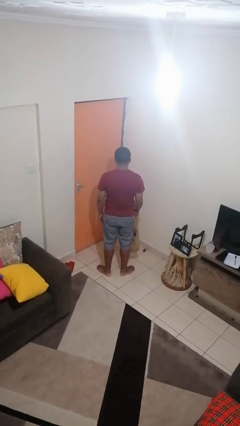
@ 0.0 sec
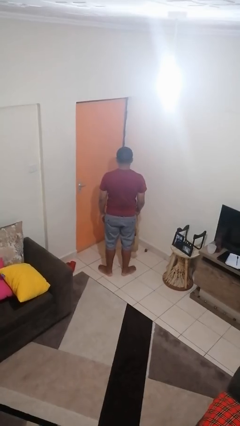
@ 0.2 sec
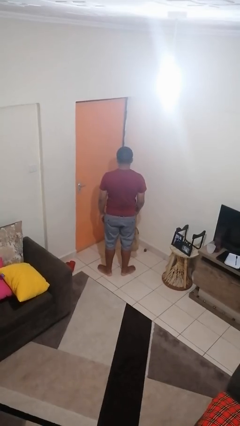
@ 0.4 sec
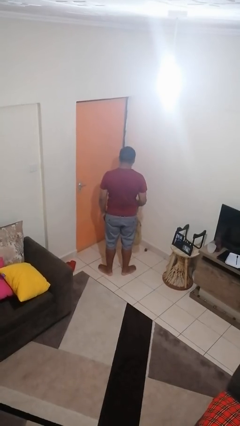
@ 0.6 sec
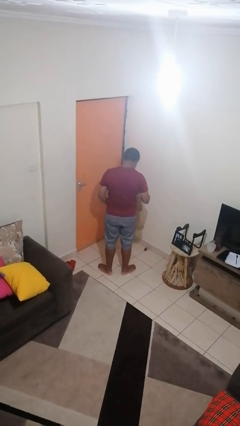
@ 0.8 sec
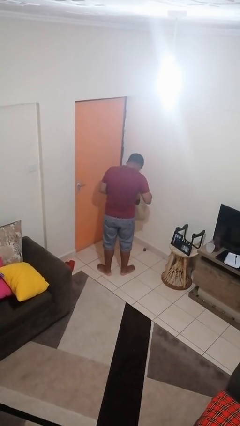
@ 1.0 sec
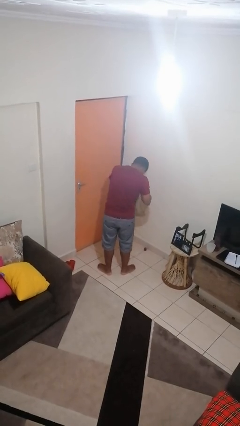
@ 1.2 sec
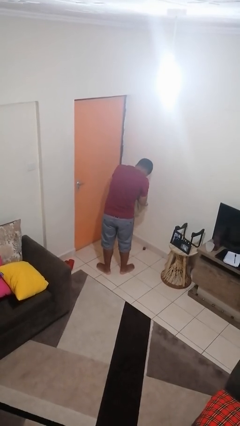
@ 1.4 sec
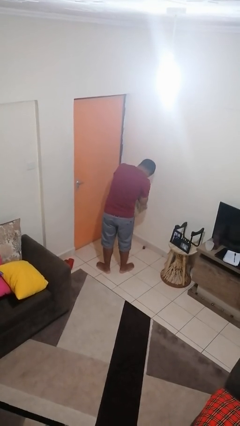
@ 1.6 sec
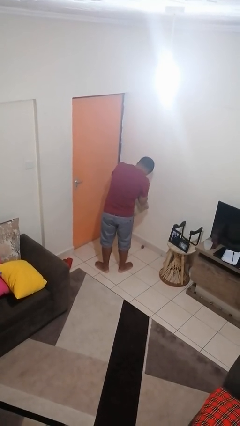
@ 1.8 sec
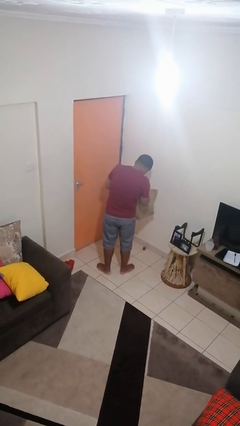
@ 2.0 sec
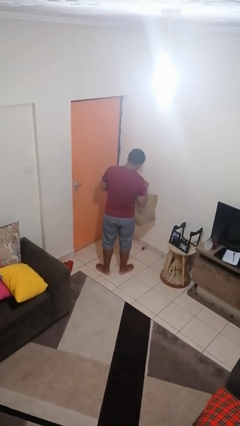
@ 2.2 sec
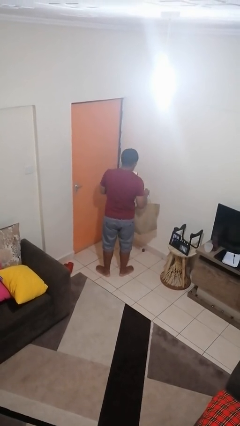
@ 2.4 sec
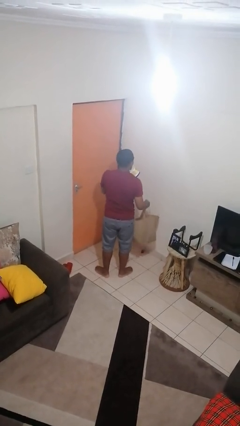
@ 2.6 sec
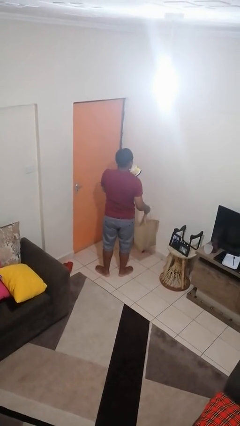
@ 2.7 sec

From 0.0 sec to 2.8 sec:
person takes object from bag

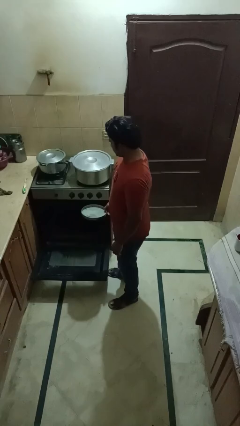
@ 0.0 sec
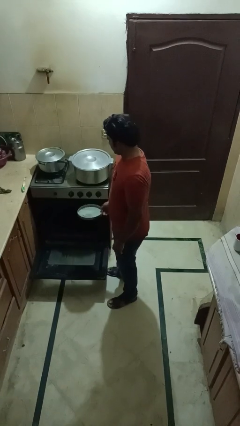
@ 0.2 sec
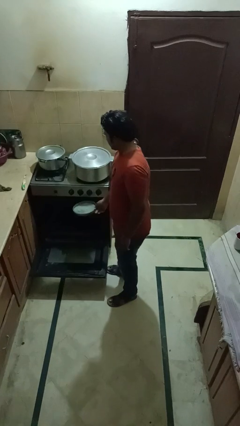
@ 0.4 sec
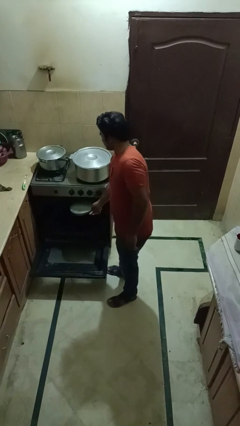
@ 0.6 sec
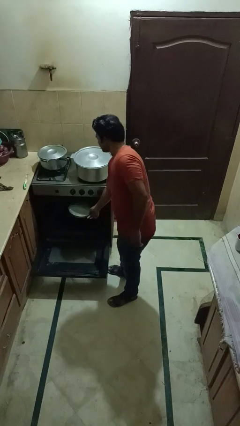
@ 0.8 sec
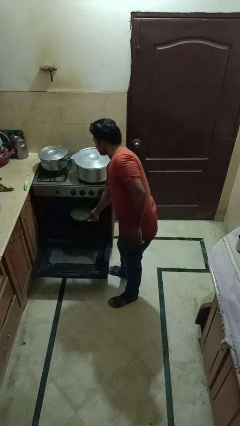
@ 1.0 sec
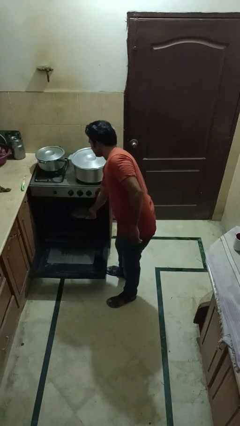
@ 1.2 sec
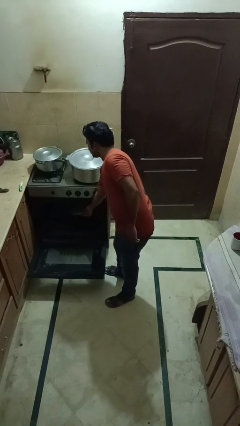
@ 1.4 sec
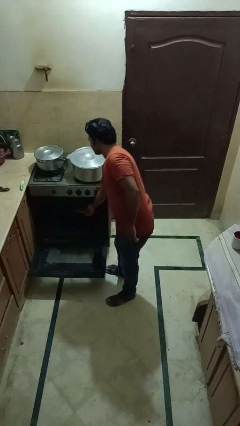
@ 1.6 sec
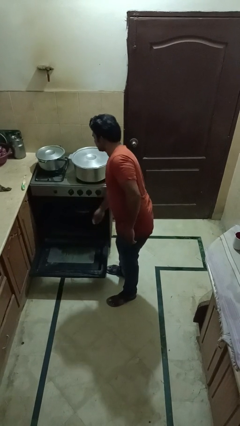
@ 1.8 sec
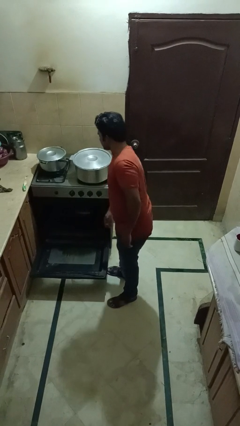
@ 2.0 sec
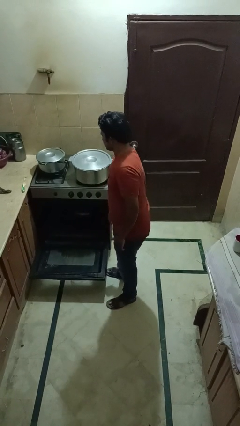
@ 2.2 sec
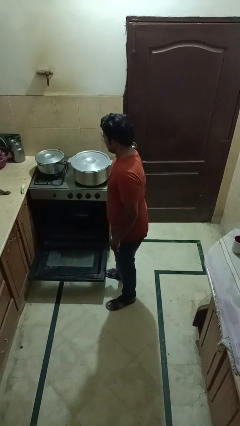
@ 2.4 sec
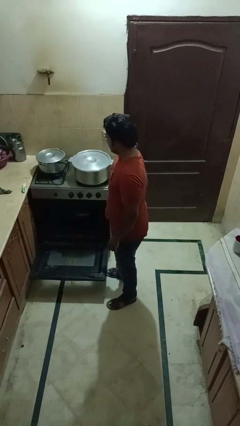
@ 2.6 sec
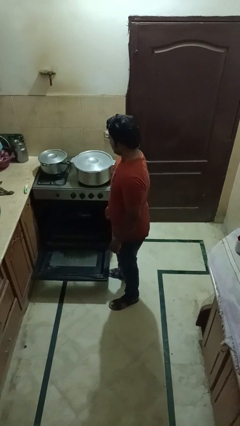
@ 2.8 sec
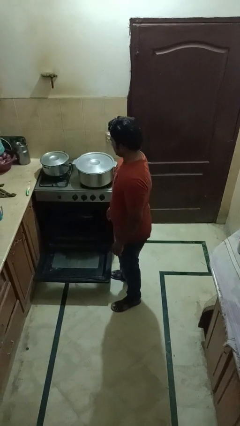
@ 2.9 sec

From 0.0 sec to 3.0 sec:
person puts object into oven

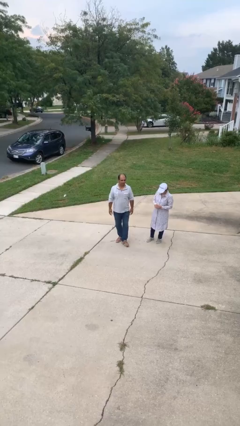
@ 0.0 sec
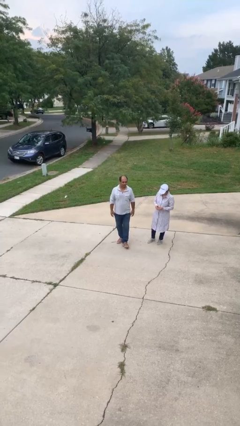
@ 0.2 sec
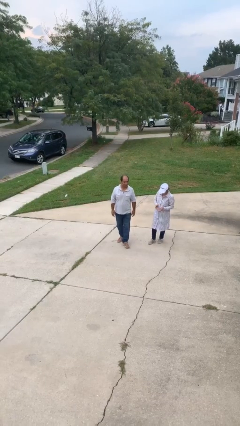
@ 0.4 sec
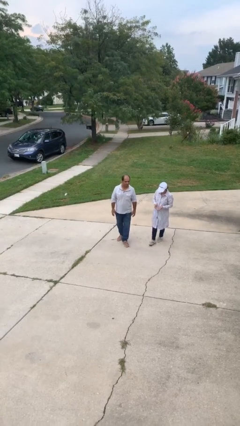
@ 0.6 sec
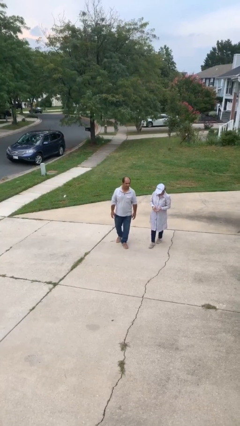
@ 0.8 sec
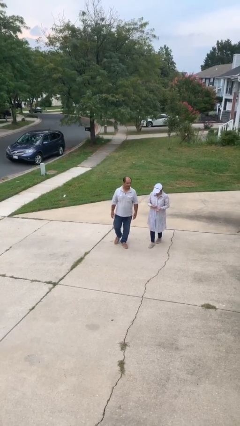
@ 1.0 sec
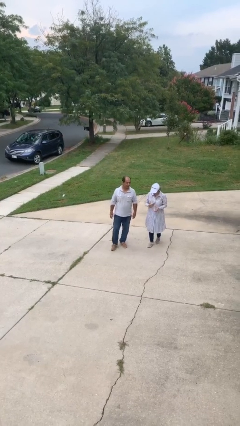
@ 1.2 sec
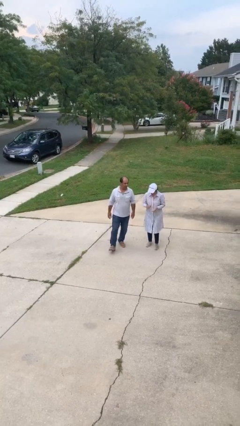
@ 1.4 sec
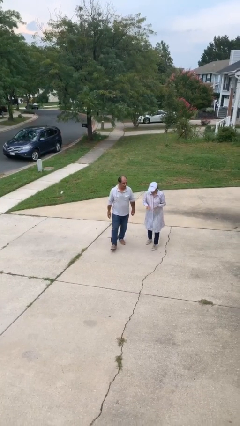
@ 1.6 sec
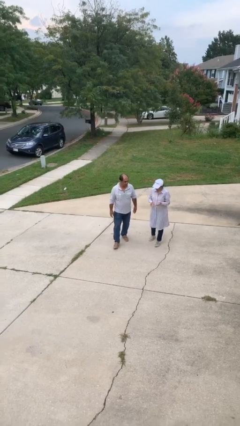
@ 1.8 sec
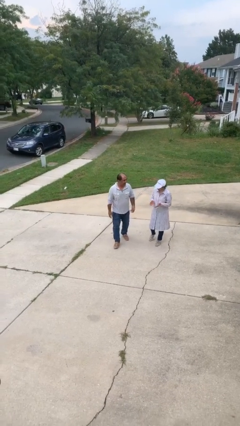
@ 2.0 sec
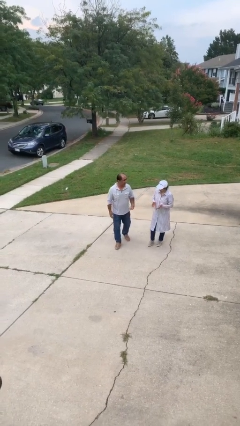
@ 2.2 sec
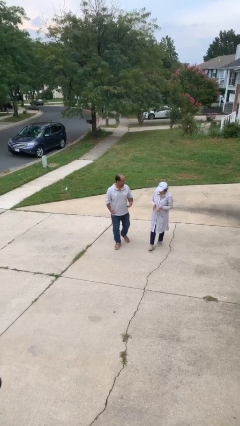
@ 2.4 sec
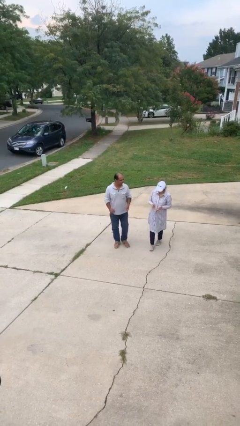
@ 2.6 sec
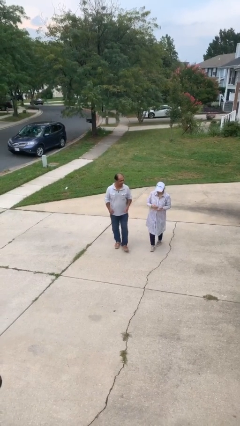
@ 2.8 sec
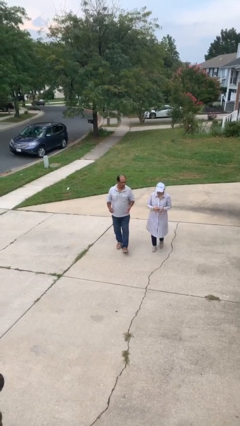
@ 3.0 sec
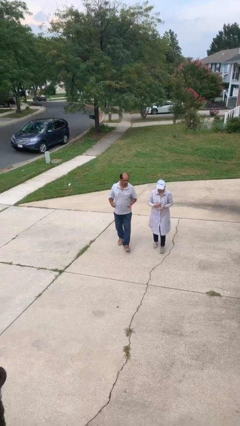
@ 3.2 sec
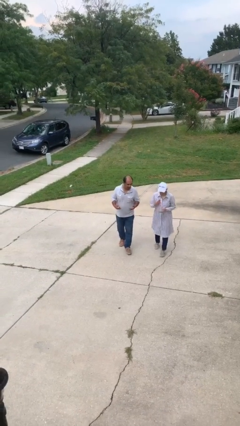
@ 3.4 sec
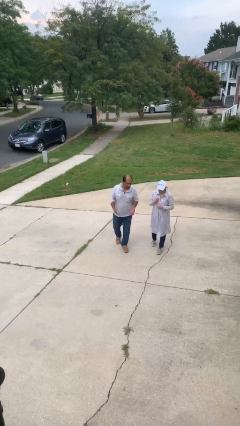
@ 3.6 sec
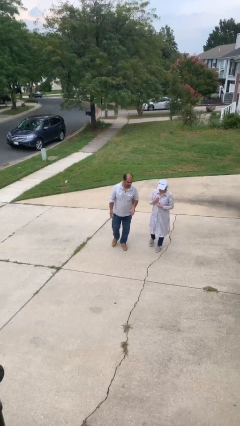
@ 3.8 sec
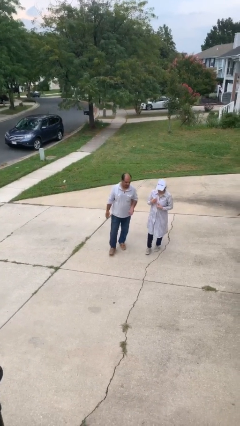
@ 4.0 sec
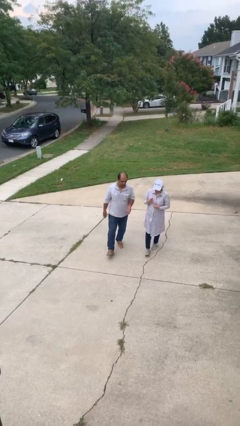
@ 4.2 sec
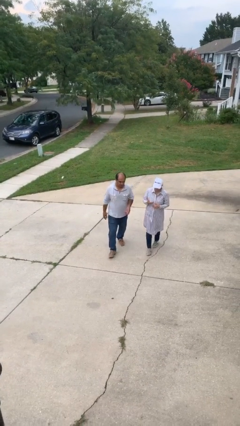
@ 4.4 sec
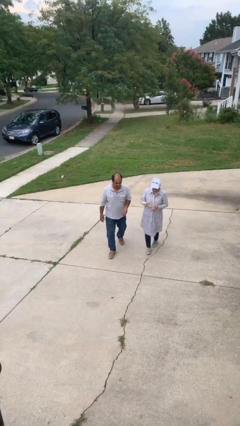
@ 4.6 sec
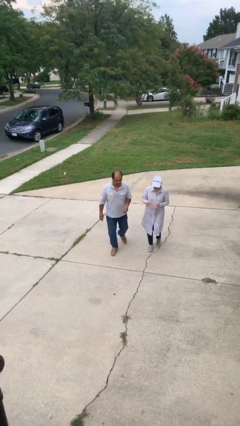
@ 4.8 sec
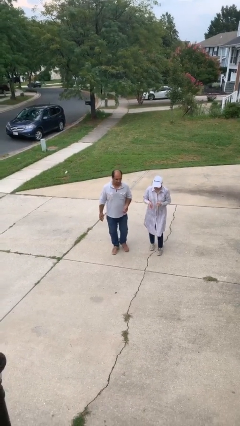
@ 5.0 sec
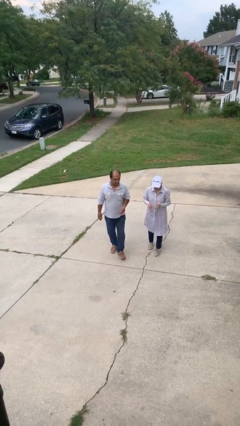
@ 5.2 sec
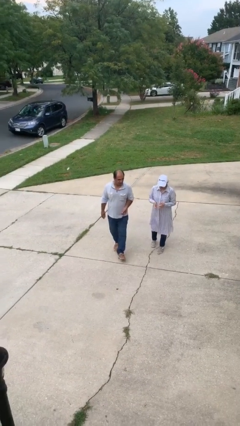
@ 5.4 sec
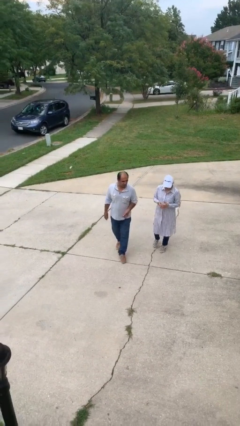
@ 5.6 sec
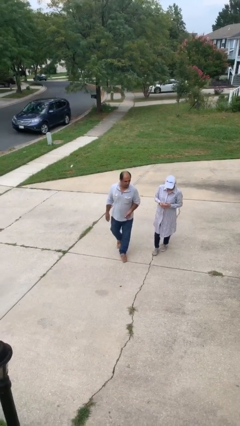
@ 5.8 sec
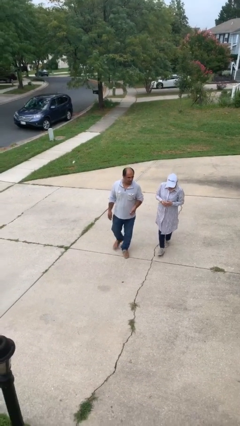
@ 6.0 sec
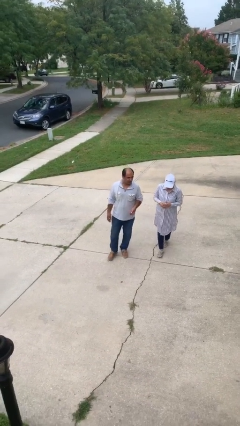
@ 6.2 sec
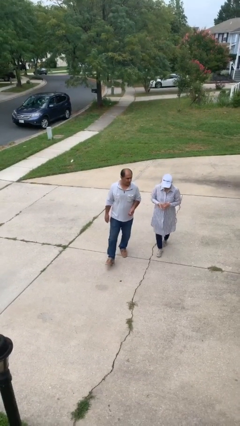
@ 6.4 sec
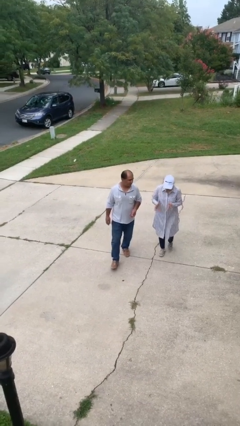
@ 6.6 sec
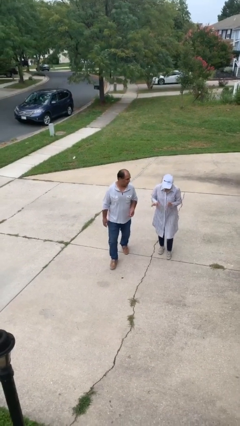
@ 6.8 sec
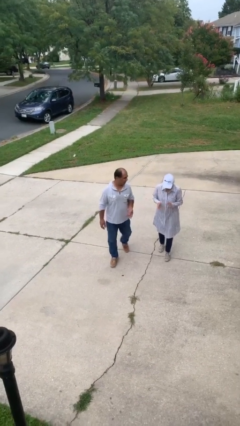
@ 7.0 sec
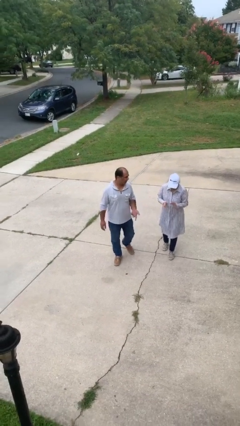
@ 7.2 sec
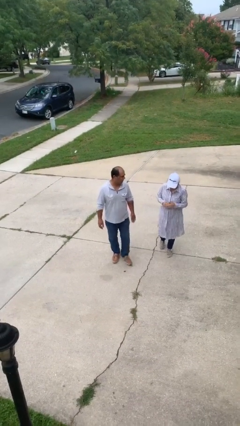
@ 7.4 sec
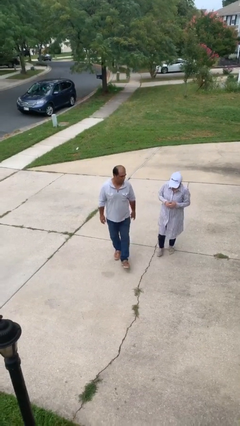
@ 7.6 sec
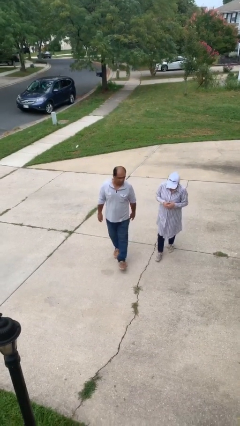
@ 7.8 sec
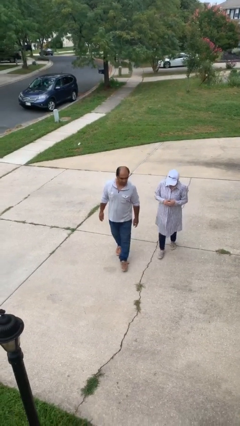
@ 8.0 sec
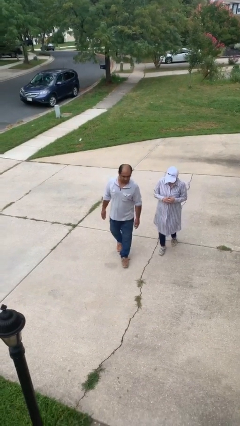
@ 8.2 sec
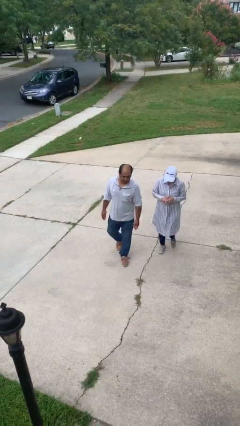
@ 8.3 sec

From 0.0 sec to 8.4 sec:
person talks to person

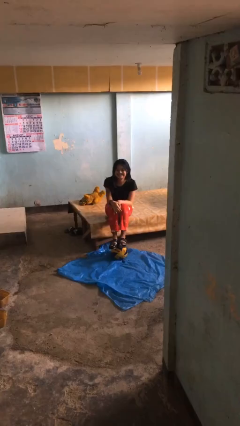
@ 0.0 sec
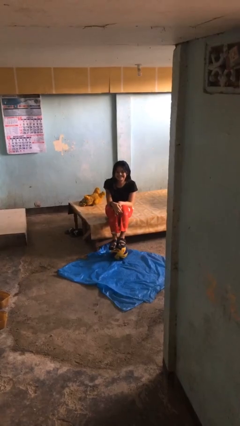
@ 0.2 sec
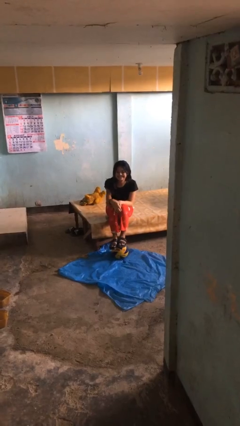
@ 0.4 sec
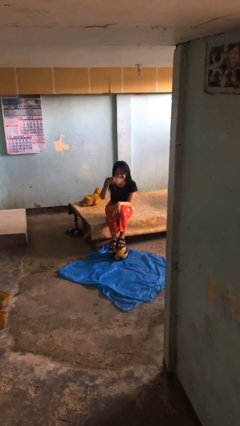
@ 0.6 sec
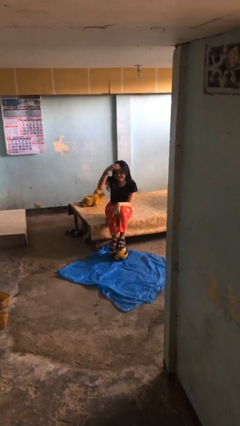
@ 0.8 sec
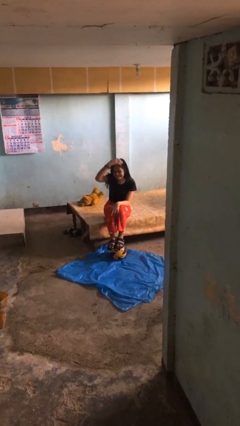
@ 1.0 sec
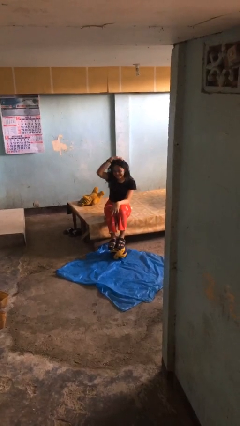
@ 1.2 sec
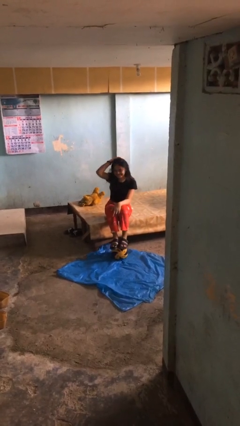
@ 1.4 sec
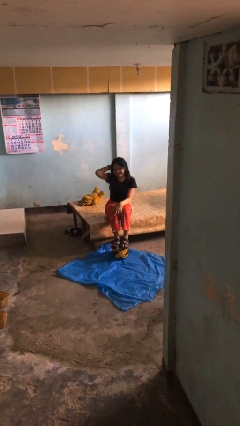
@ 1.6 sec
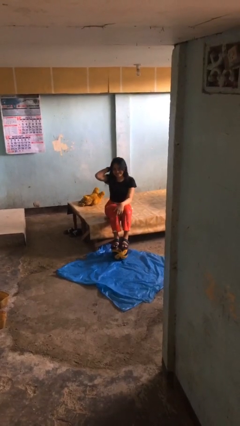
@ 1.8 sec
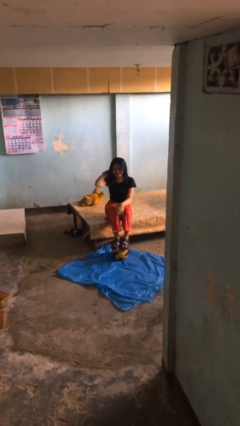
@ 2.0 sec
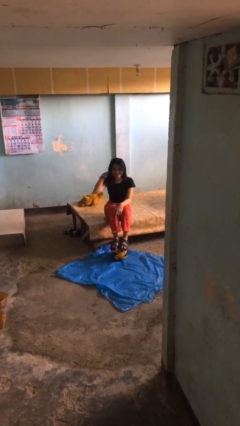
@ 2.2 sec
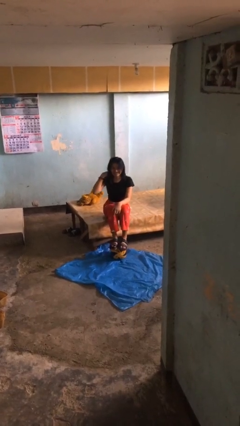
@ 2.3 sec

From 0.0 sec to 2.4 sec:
person strokes hair

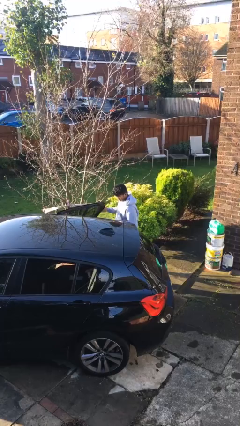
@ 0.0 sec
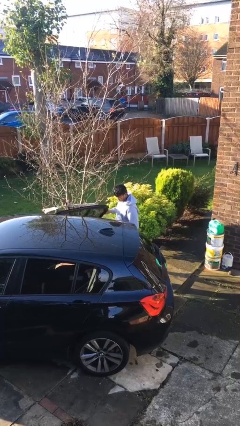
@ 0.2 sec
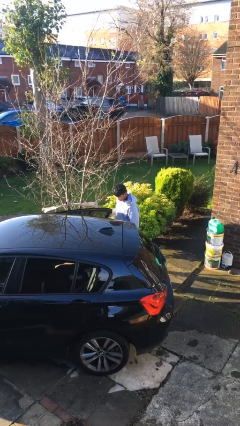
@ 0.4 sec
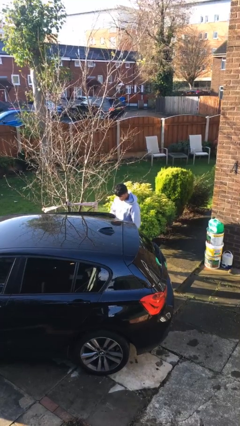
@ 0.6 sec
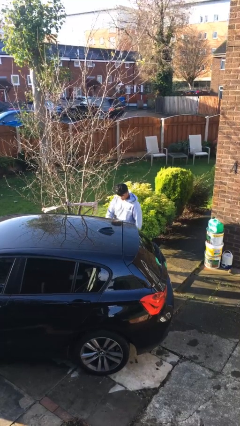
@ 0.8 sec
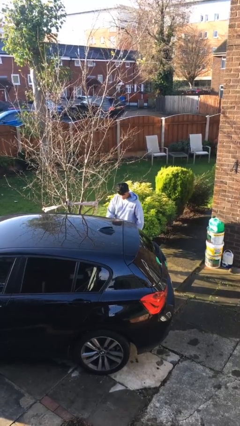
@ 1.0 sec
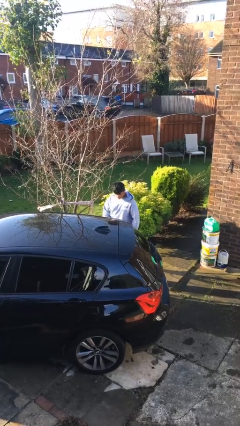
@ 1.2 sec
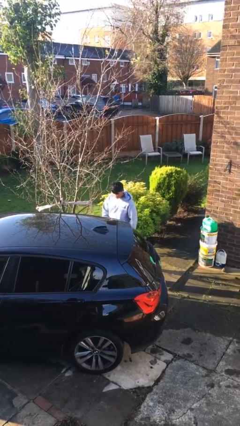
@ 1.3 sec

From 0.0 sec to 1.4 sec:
person closes car door
